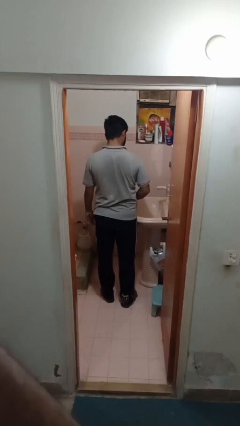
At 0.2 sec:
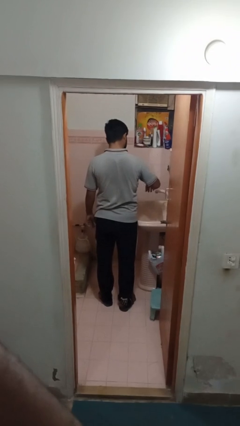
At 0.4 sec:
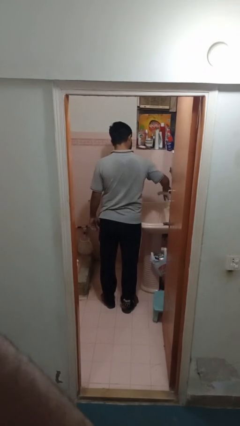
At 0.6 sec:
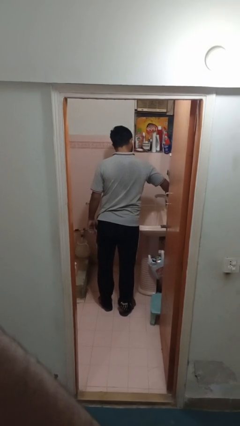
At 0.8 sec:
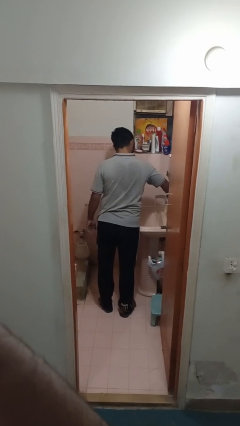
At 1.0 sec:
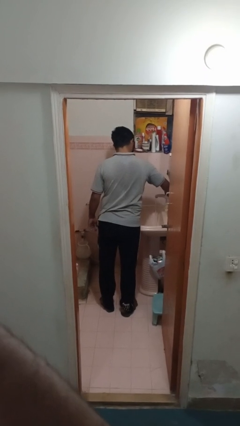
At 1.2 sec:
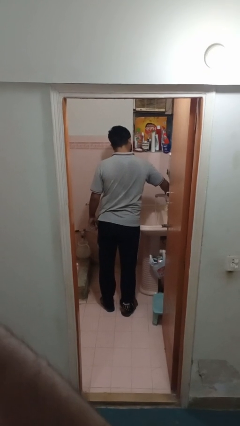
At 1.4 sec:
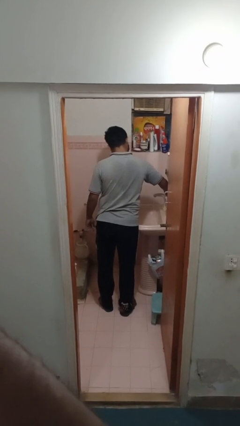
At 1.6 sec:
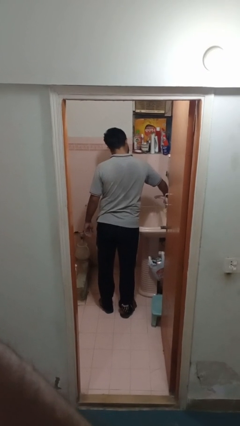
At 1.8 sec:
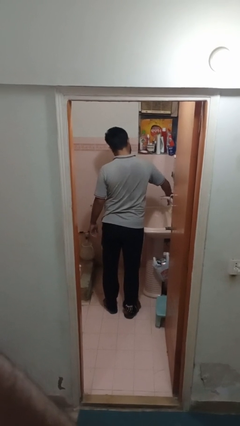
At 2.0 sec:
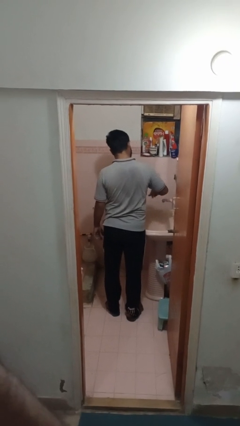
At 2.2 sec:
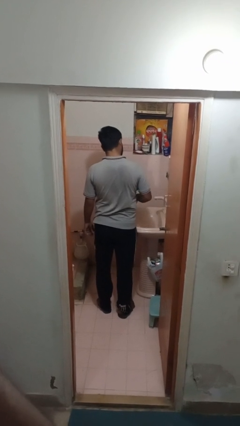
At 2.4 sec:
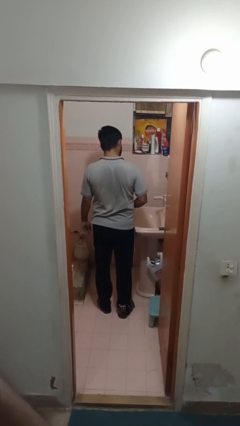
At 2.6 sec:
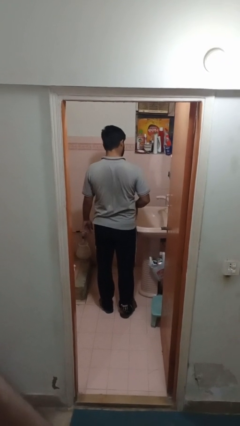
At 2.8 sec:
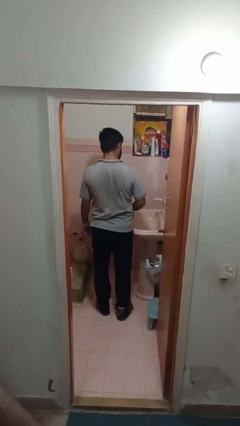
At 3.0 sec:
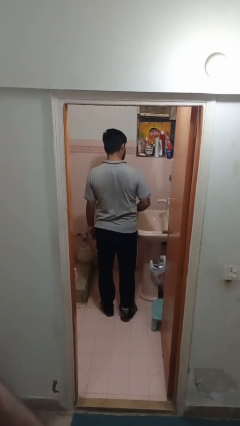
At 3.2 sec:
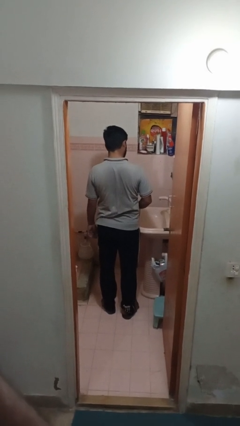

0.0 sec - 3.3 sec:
person turns off faucet

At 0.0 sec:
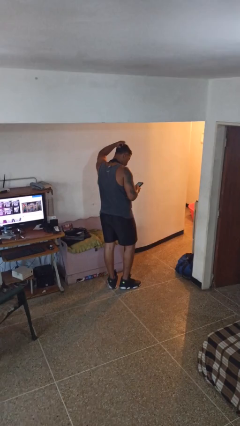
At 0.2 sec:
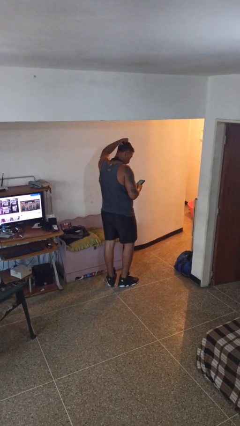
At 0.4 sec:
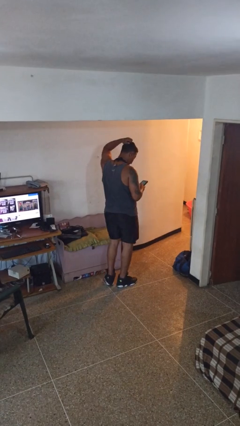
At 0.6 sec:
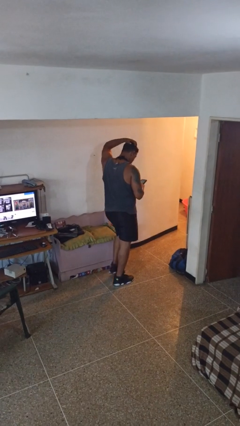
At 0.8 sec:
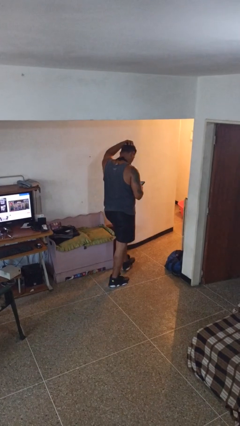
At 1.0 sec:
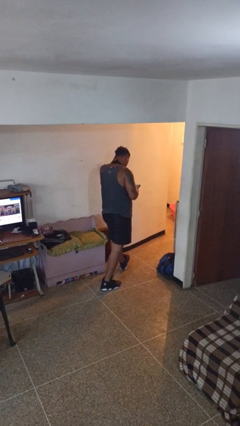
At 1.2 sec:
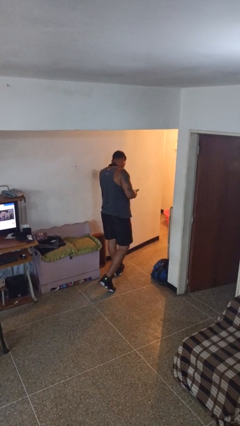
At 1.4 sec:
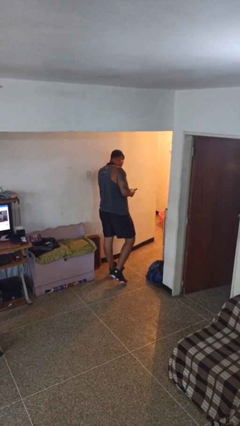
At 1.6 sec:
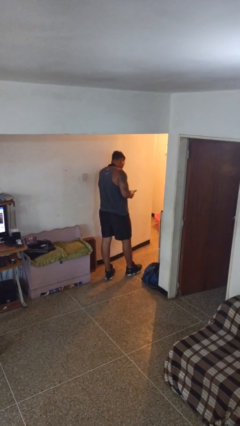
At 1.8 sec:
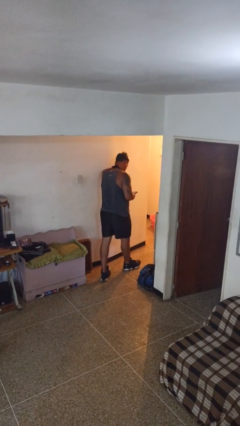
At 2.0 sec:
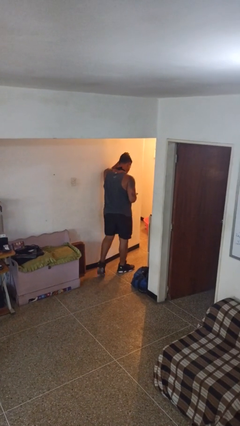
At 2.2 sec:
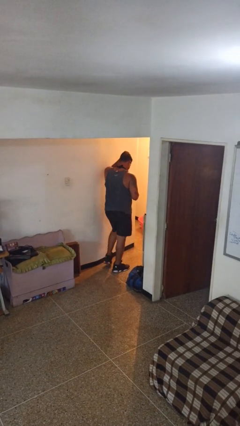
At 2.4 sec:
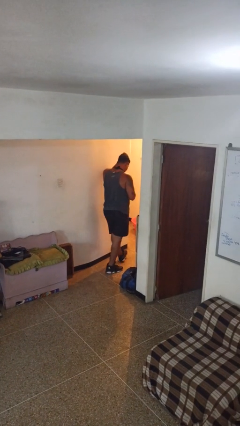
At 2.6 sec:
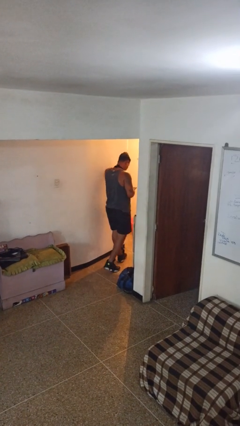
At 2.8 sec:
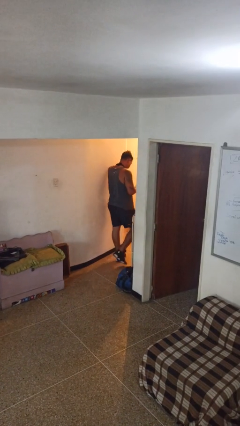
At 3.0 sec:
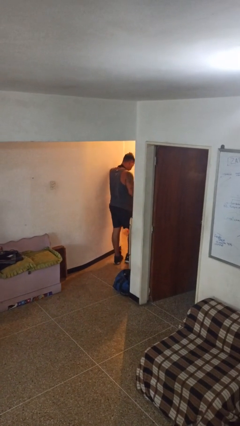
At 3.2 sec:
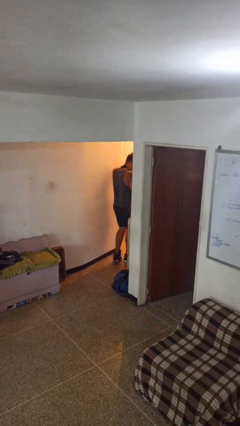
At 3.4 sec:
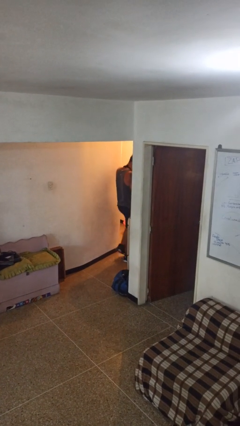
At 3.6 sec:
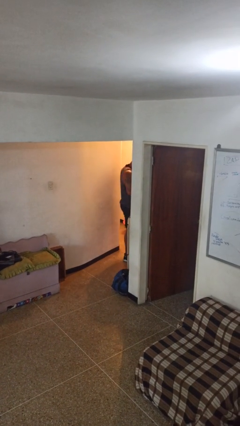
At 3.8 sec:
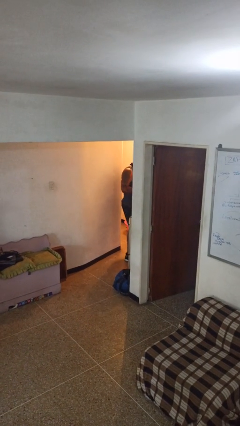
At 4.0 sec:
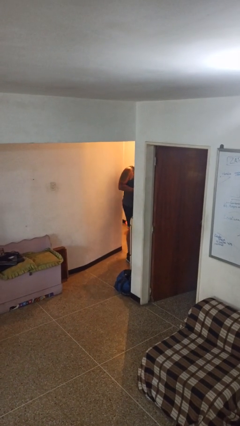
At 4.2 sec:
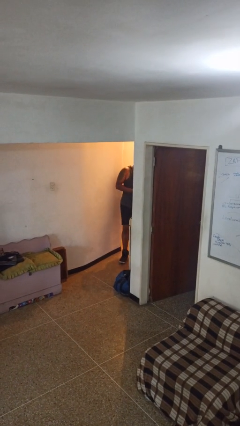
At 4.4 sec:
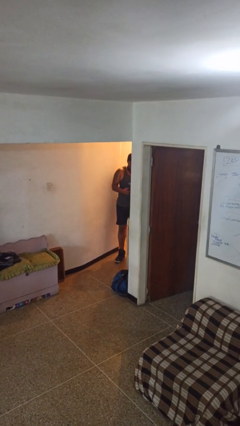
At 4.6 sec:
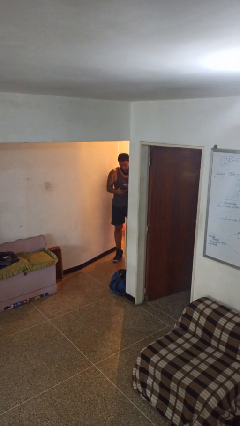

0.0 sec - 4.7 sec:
person exits scene through structure

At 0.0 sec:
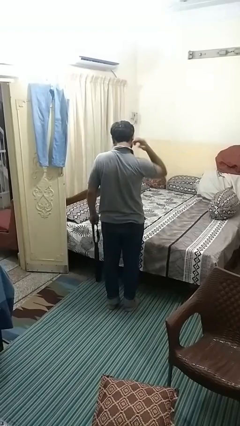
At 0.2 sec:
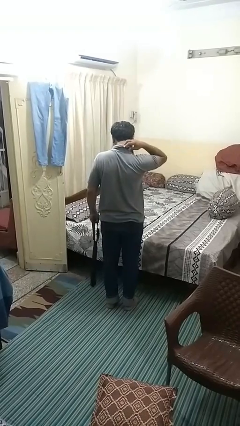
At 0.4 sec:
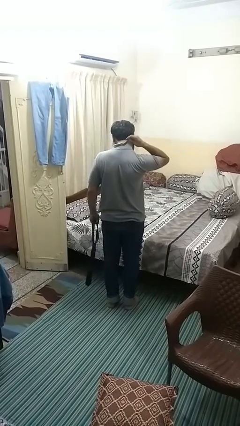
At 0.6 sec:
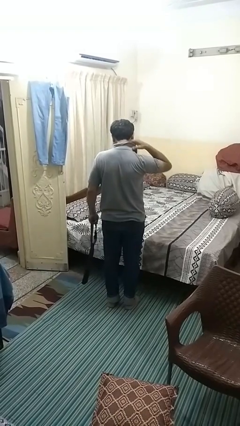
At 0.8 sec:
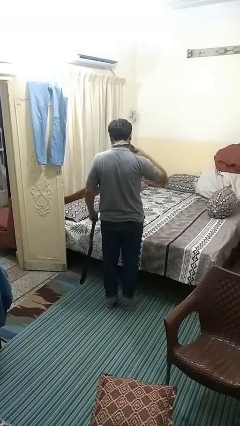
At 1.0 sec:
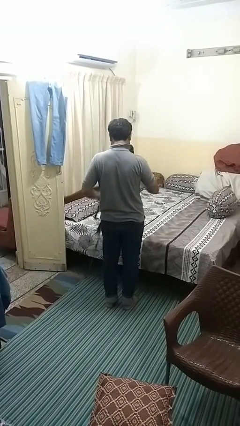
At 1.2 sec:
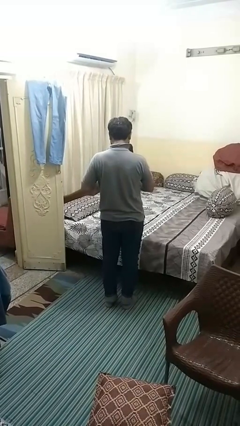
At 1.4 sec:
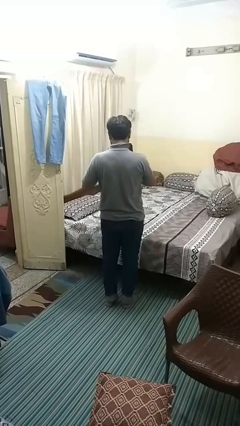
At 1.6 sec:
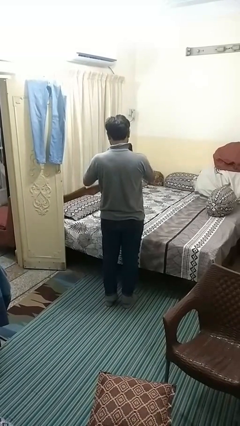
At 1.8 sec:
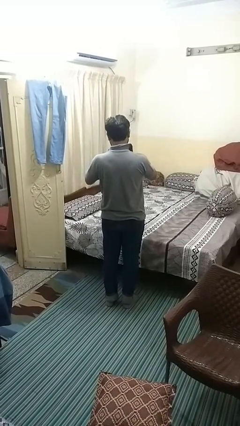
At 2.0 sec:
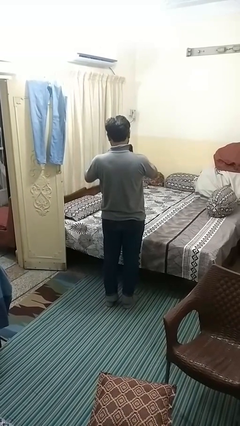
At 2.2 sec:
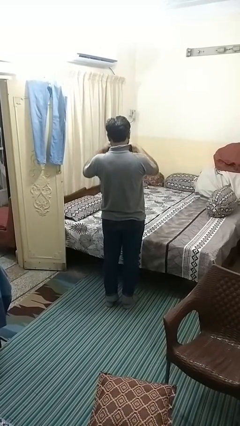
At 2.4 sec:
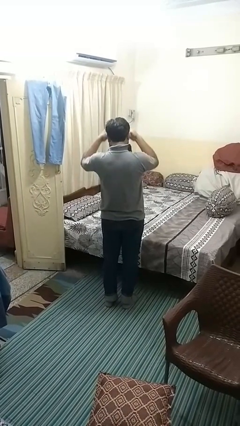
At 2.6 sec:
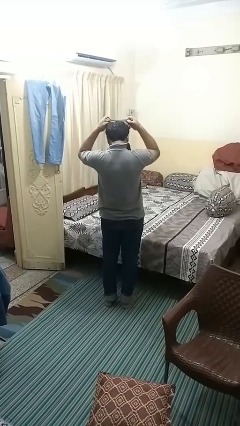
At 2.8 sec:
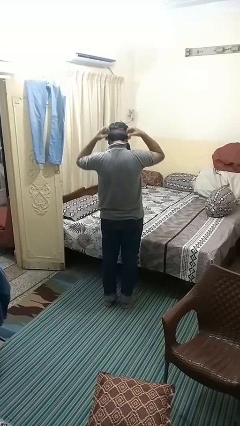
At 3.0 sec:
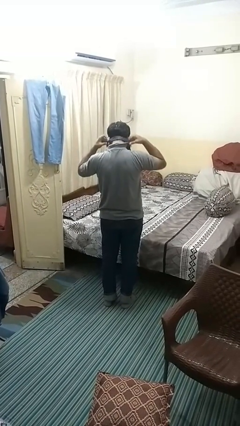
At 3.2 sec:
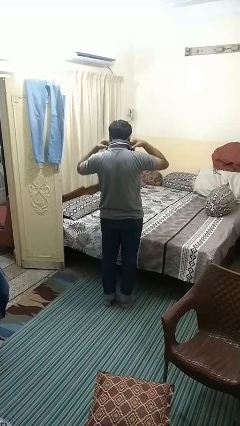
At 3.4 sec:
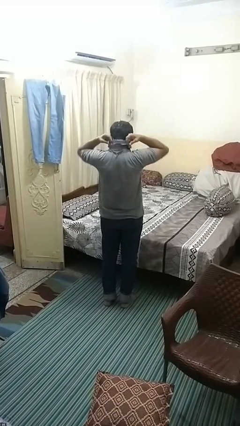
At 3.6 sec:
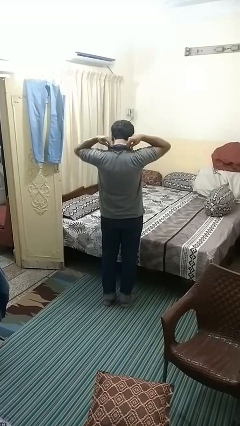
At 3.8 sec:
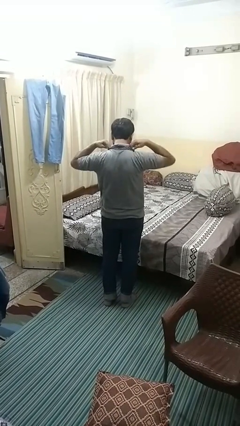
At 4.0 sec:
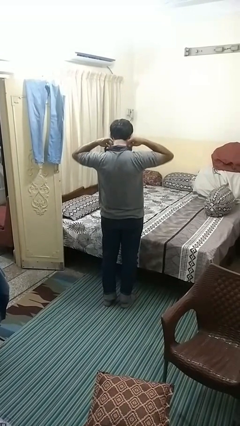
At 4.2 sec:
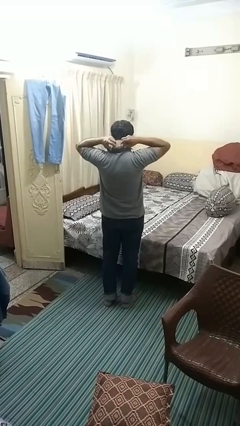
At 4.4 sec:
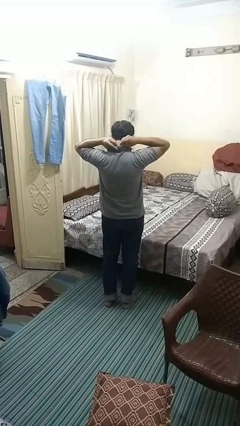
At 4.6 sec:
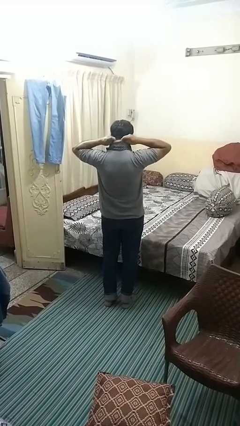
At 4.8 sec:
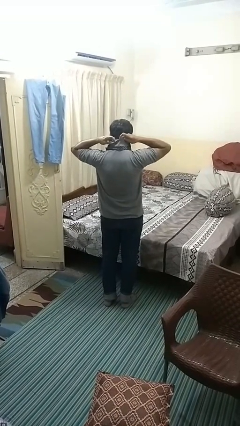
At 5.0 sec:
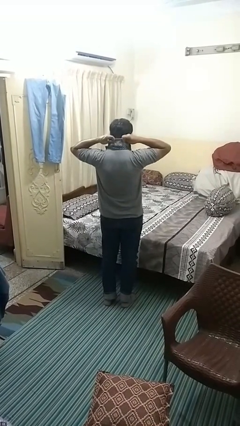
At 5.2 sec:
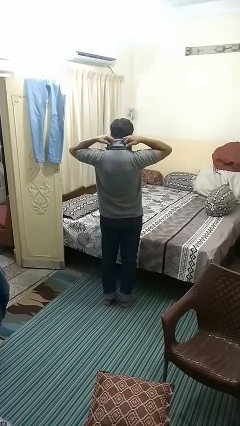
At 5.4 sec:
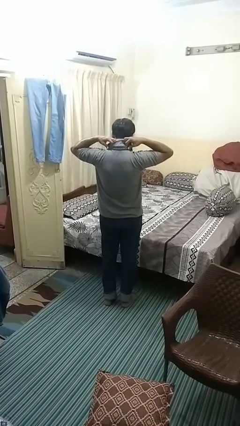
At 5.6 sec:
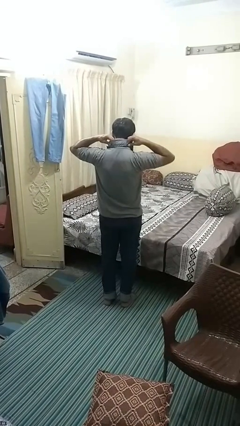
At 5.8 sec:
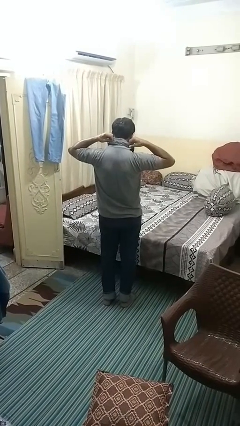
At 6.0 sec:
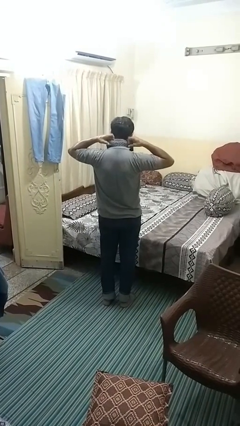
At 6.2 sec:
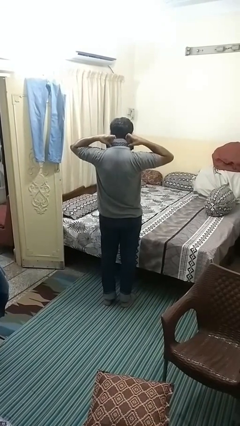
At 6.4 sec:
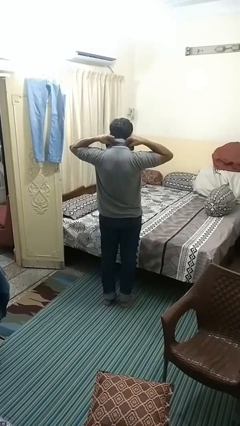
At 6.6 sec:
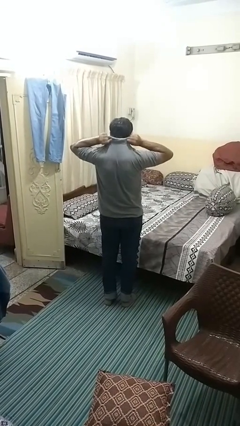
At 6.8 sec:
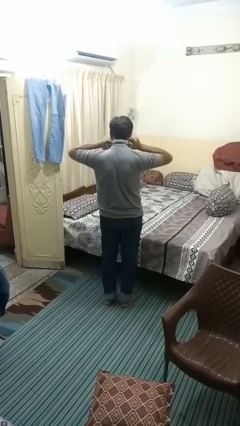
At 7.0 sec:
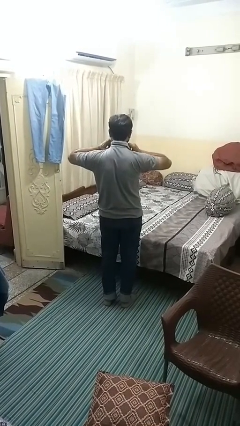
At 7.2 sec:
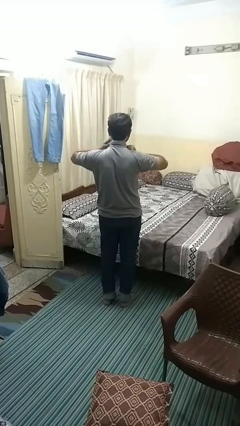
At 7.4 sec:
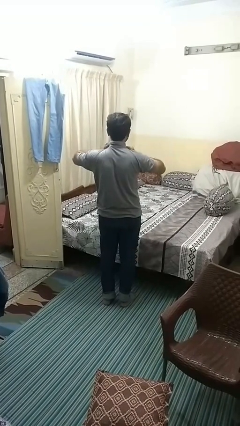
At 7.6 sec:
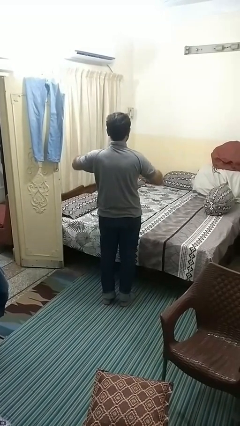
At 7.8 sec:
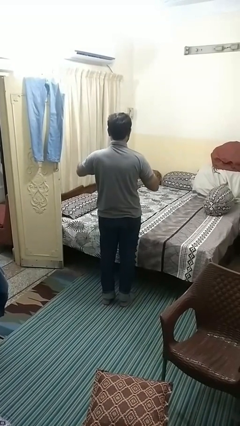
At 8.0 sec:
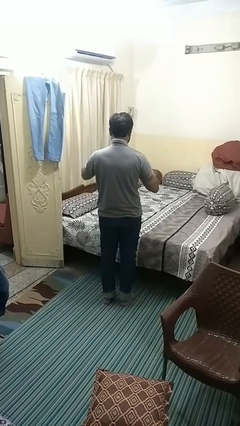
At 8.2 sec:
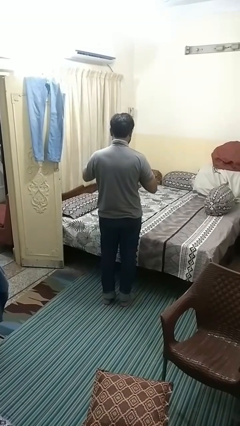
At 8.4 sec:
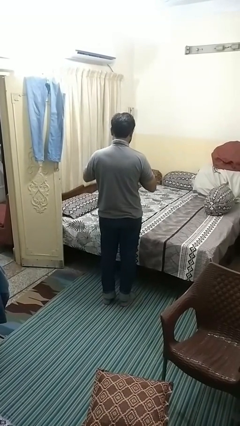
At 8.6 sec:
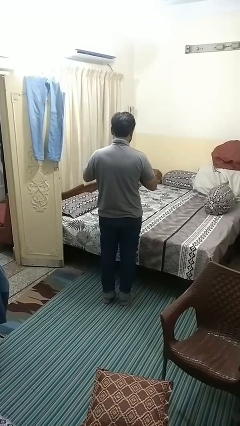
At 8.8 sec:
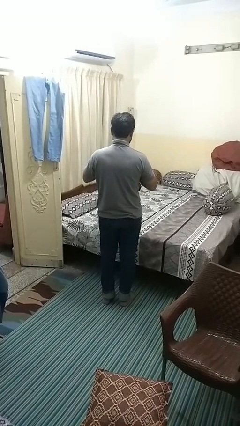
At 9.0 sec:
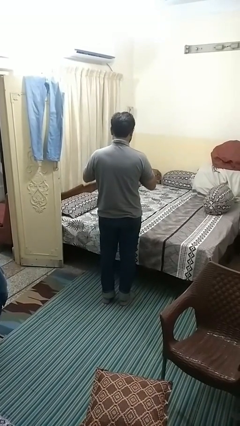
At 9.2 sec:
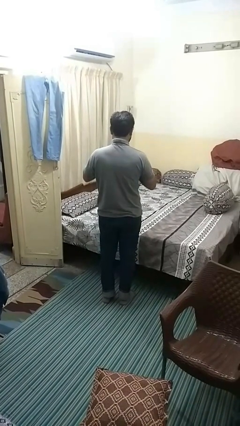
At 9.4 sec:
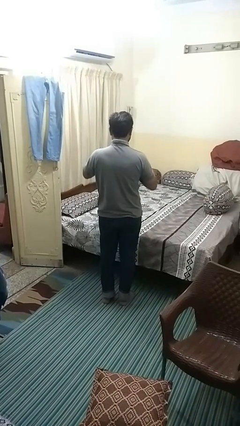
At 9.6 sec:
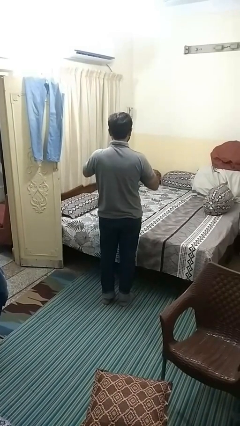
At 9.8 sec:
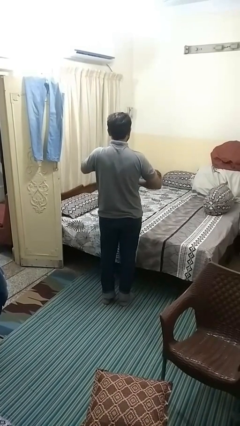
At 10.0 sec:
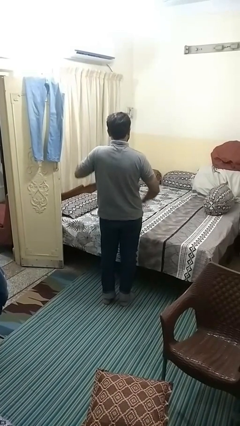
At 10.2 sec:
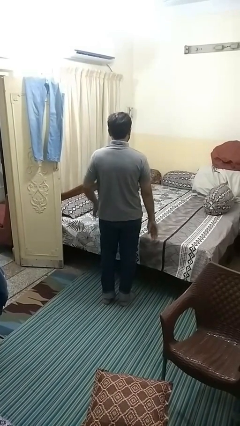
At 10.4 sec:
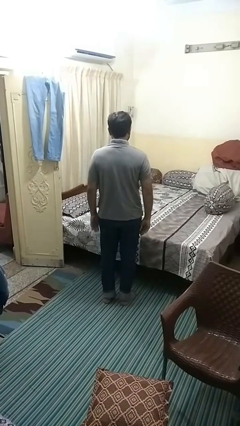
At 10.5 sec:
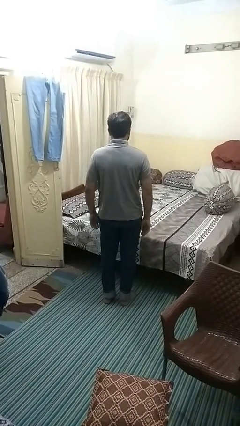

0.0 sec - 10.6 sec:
person puts on necktie
